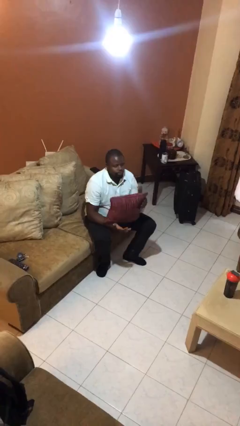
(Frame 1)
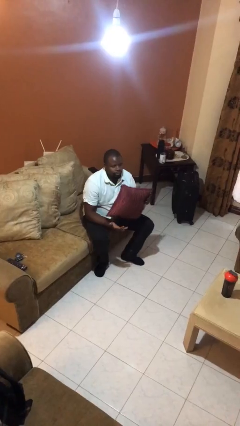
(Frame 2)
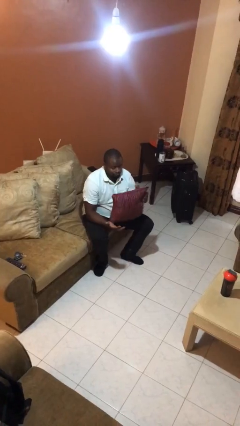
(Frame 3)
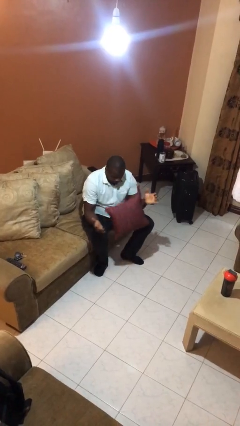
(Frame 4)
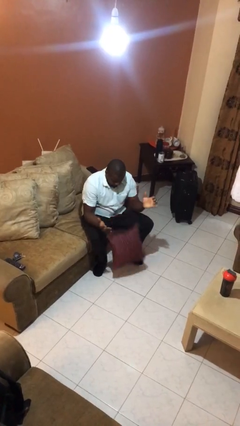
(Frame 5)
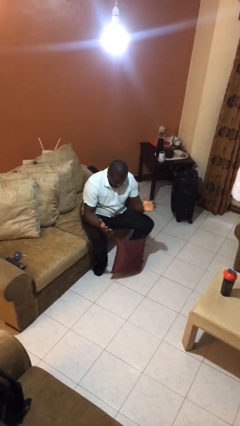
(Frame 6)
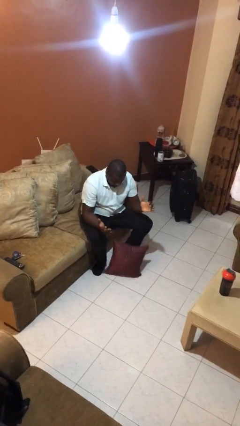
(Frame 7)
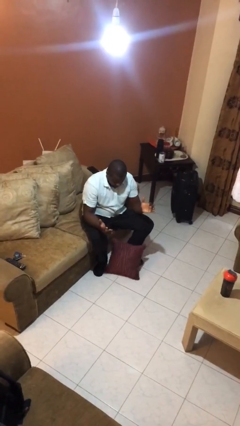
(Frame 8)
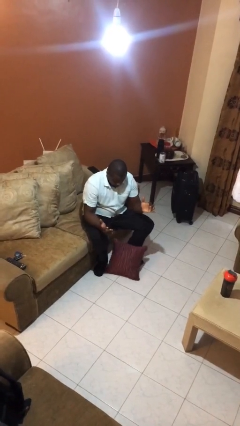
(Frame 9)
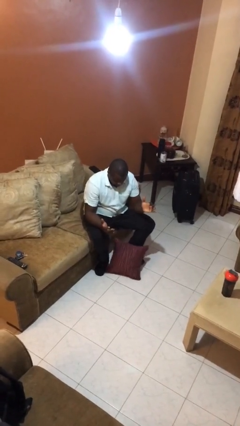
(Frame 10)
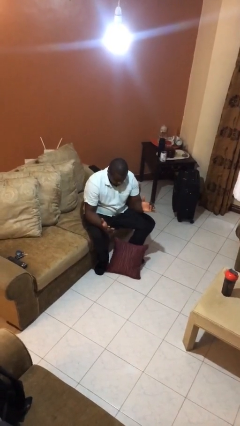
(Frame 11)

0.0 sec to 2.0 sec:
person drops object

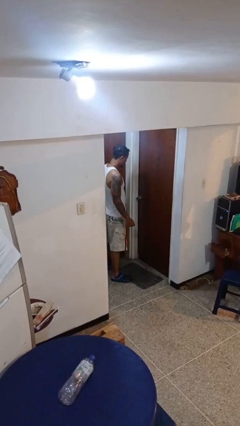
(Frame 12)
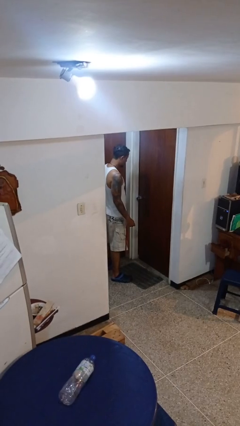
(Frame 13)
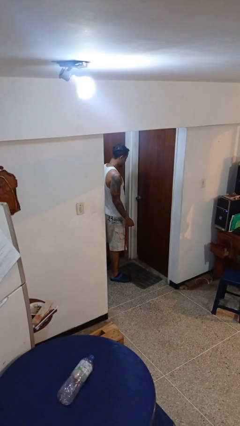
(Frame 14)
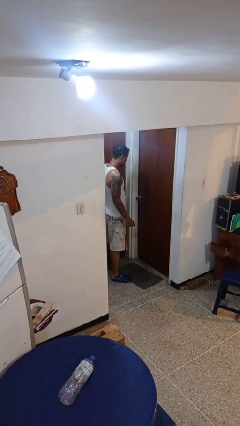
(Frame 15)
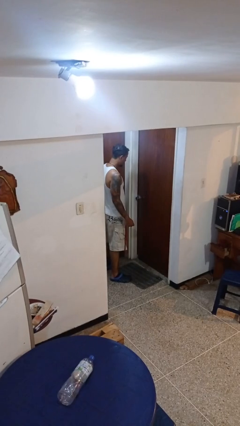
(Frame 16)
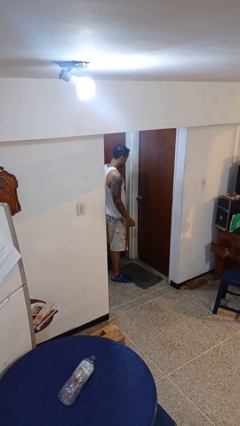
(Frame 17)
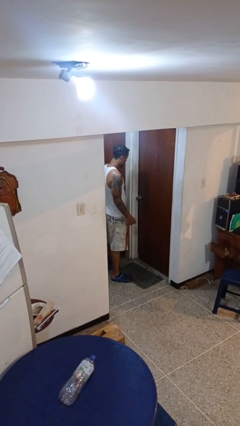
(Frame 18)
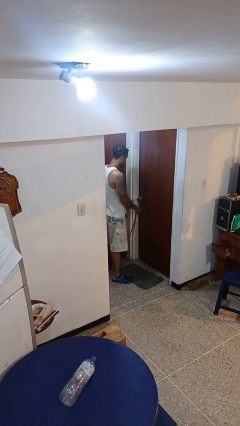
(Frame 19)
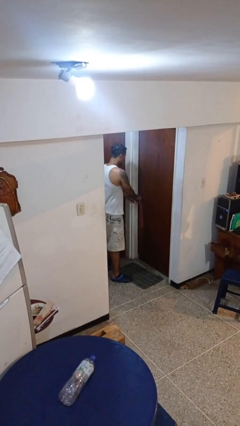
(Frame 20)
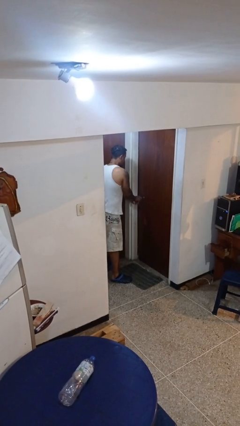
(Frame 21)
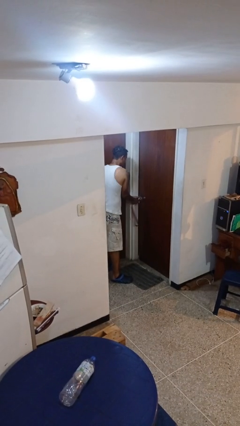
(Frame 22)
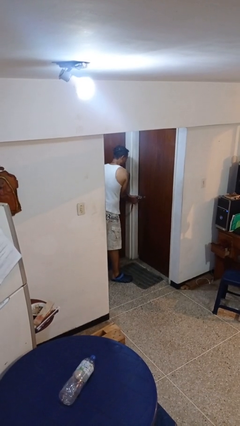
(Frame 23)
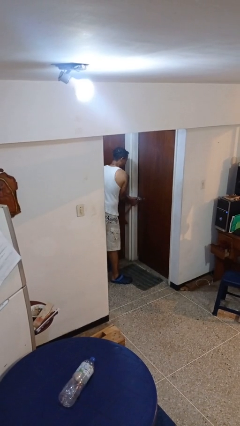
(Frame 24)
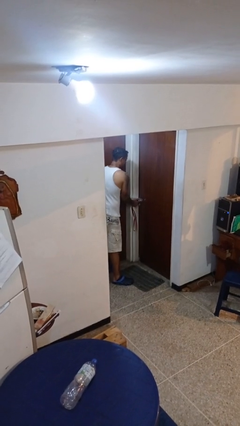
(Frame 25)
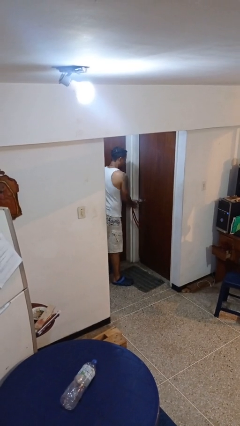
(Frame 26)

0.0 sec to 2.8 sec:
person unlocks door with keys

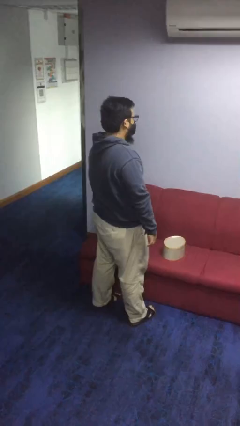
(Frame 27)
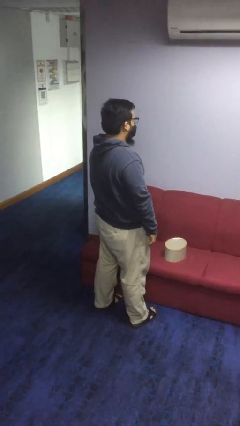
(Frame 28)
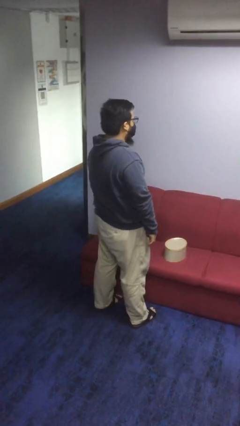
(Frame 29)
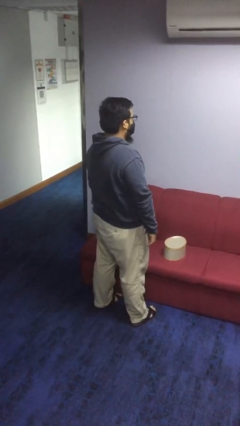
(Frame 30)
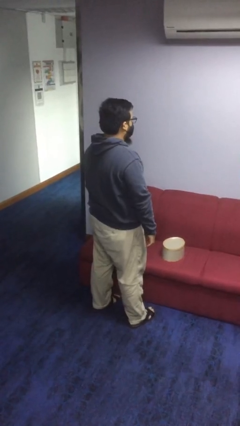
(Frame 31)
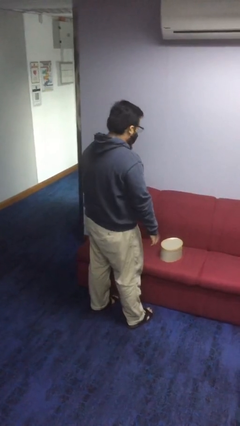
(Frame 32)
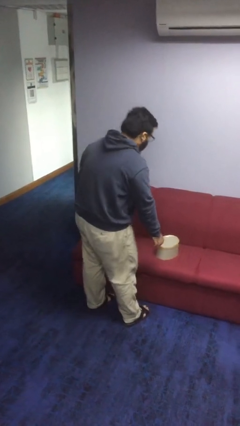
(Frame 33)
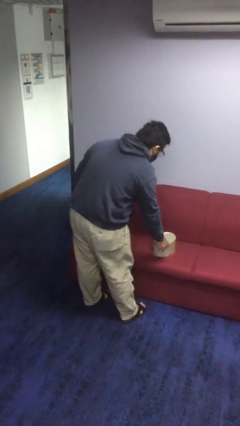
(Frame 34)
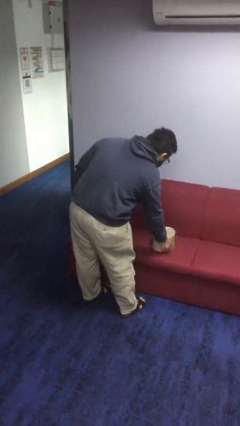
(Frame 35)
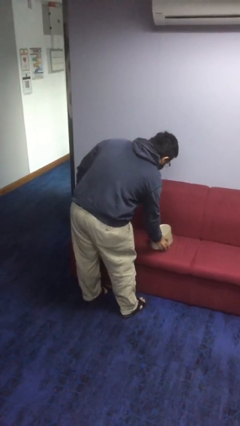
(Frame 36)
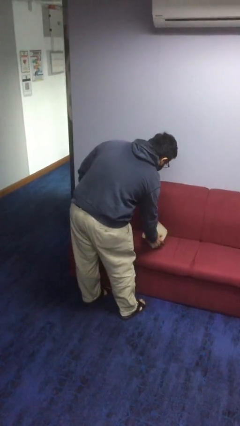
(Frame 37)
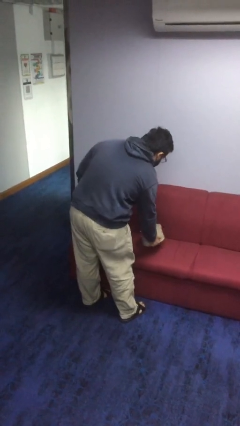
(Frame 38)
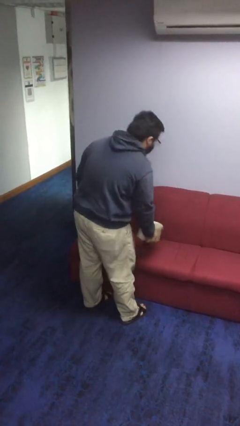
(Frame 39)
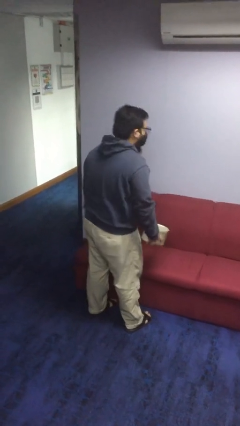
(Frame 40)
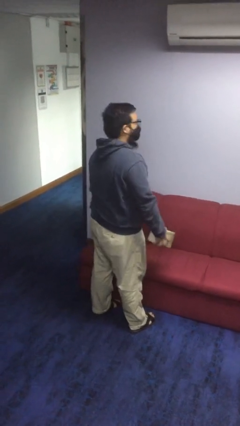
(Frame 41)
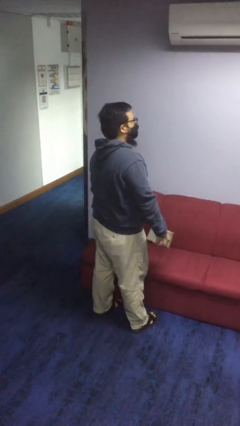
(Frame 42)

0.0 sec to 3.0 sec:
person picks up object from couch

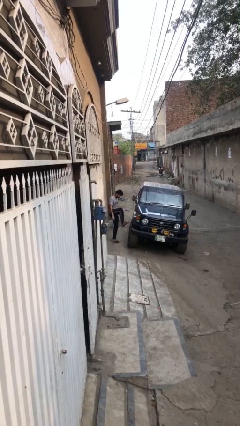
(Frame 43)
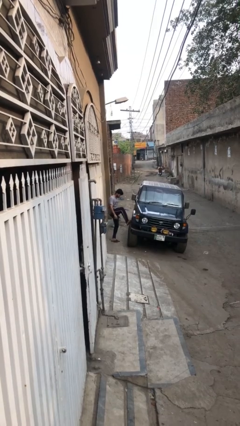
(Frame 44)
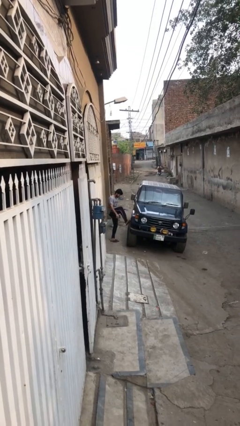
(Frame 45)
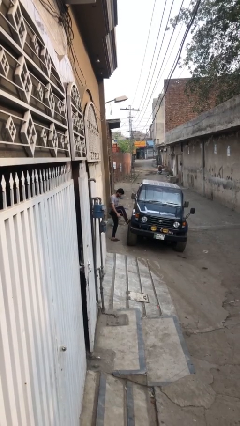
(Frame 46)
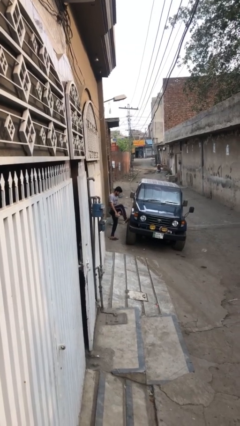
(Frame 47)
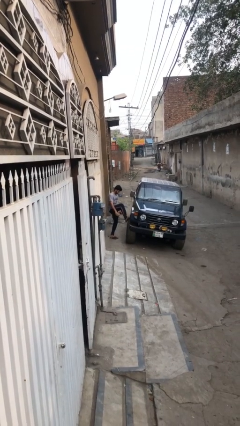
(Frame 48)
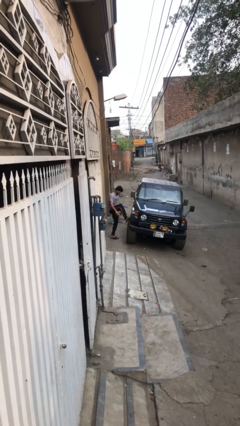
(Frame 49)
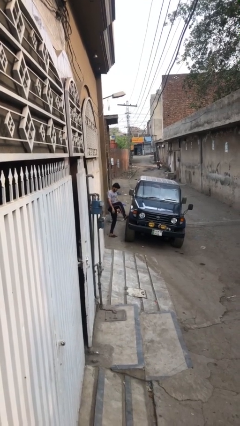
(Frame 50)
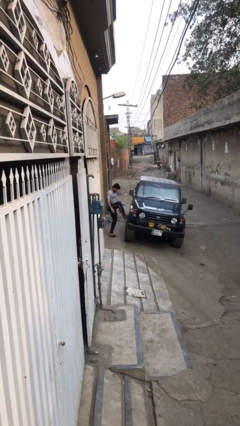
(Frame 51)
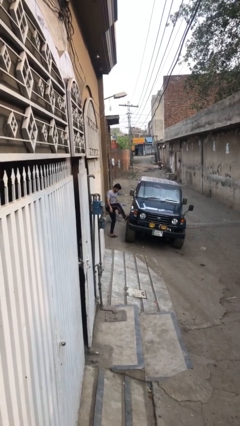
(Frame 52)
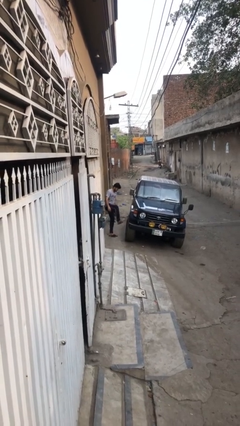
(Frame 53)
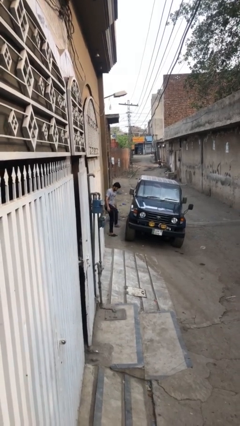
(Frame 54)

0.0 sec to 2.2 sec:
person kicks car tires

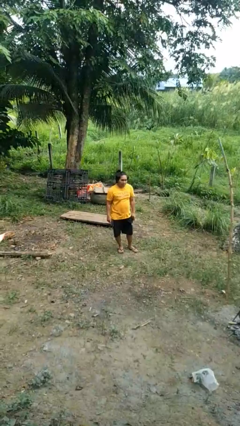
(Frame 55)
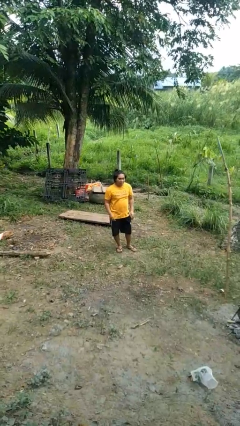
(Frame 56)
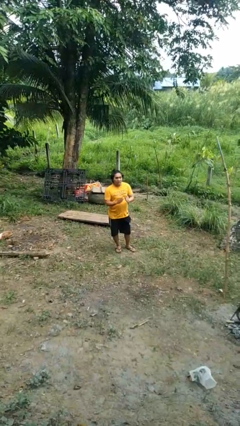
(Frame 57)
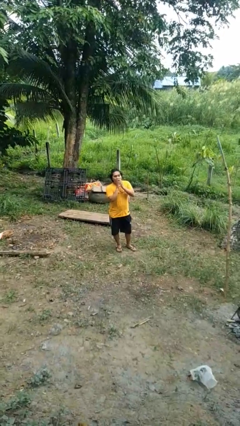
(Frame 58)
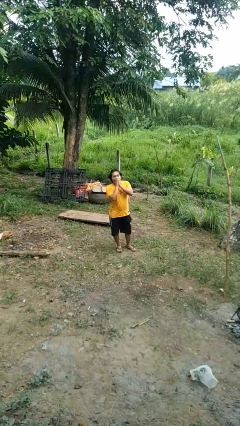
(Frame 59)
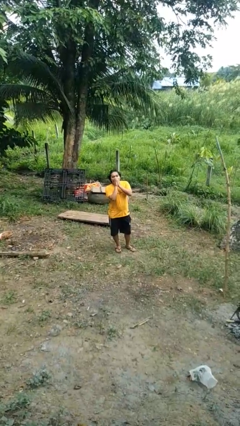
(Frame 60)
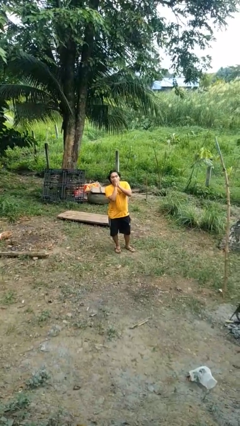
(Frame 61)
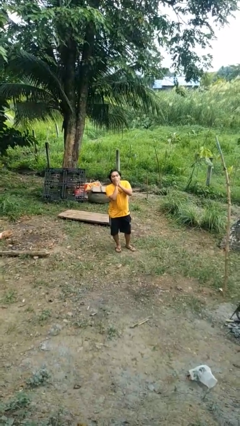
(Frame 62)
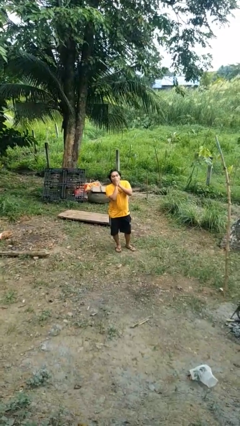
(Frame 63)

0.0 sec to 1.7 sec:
person covers face with hands

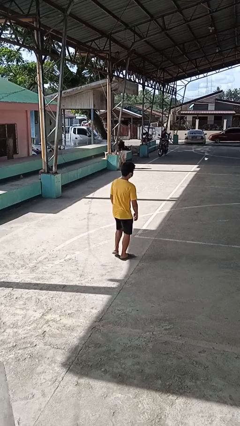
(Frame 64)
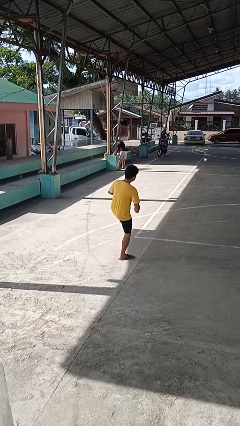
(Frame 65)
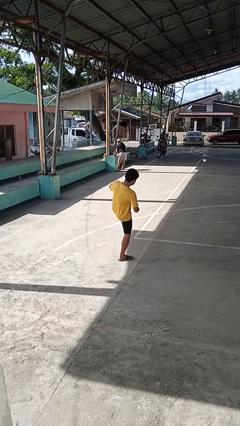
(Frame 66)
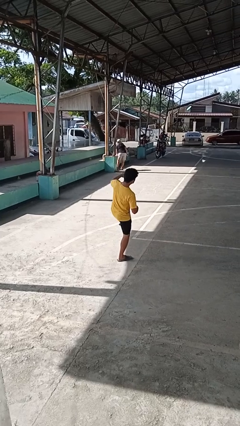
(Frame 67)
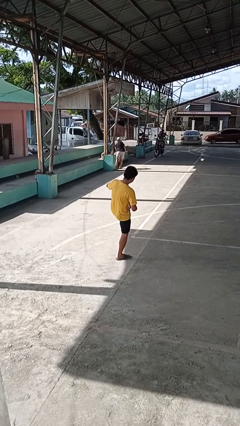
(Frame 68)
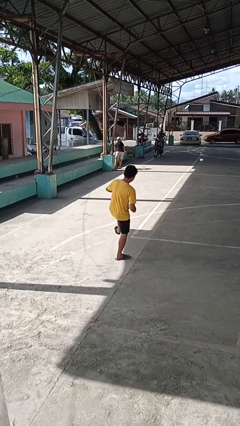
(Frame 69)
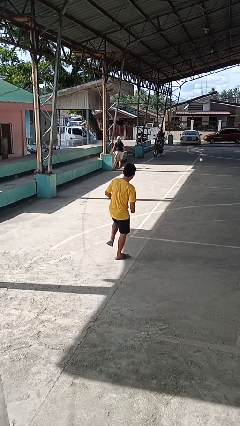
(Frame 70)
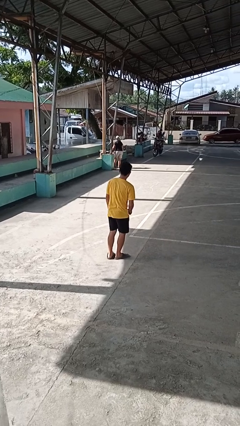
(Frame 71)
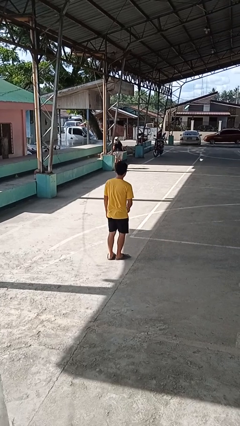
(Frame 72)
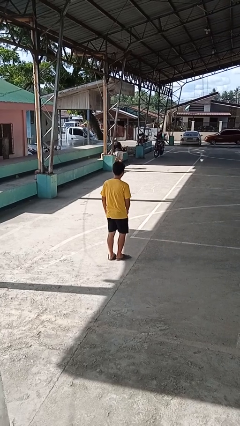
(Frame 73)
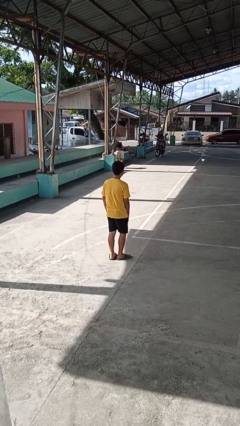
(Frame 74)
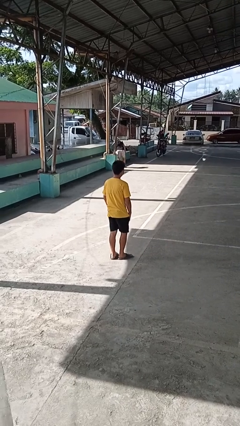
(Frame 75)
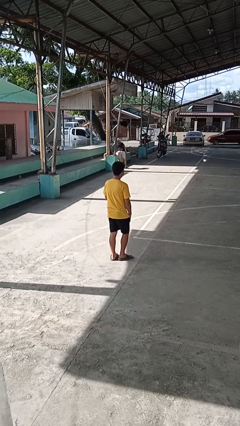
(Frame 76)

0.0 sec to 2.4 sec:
person karate kicks

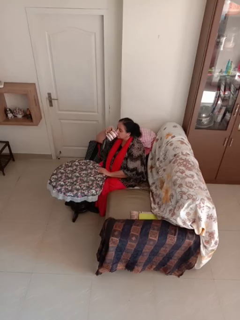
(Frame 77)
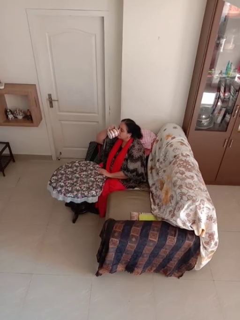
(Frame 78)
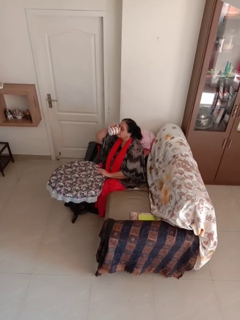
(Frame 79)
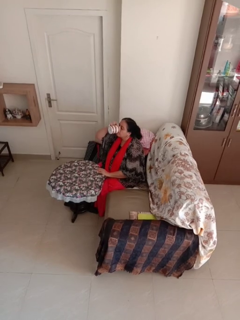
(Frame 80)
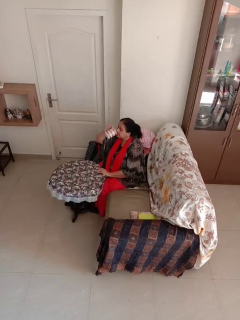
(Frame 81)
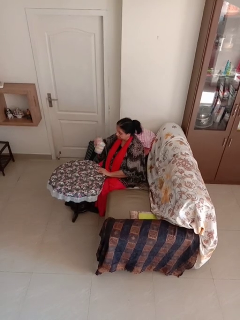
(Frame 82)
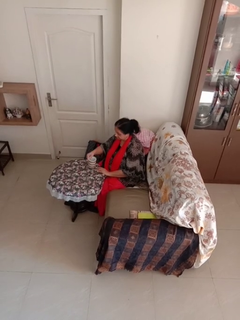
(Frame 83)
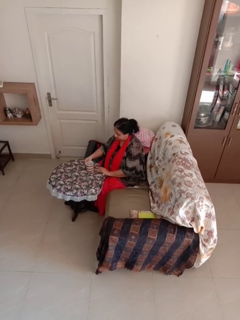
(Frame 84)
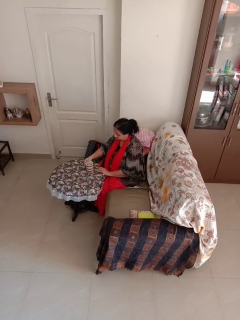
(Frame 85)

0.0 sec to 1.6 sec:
person drinks from mug

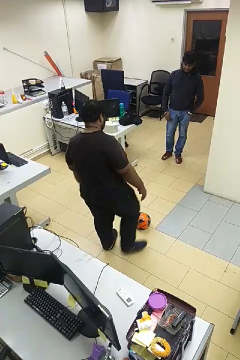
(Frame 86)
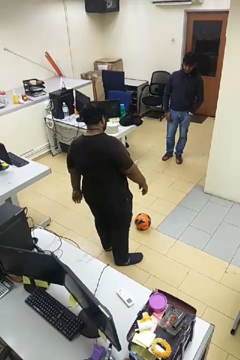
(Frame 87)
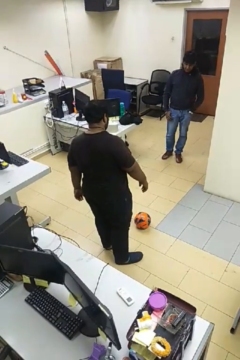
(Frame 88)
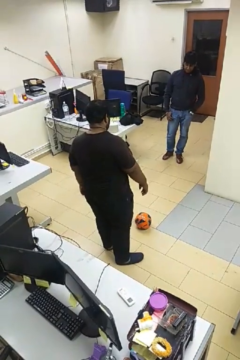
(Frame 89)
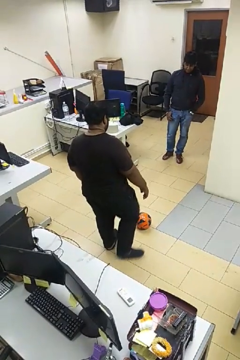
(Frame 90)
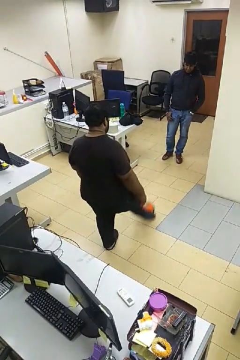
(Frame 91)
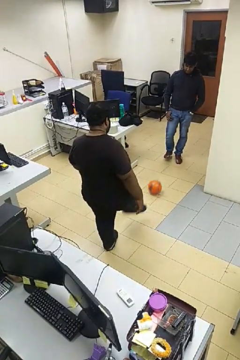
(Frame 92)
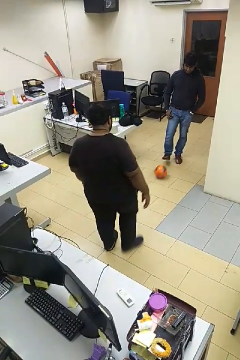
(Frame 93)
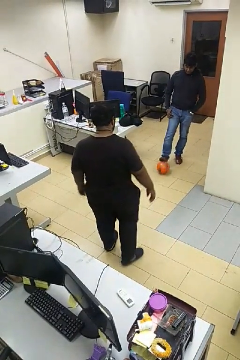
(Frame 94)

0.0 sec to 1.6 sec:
person kicks object to person
